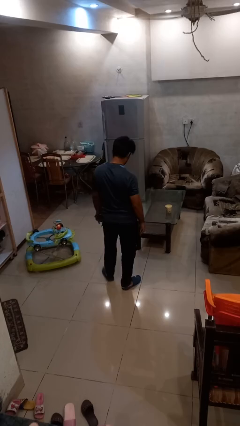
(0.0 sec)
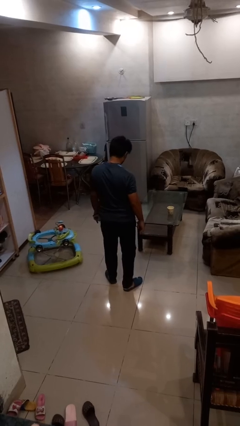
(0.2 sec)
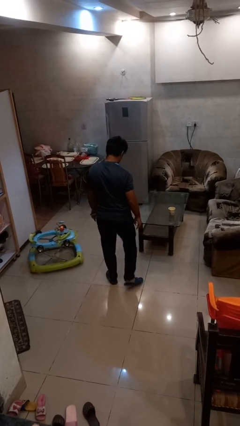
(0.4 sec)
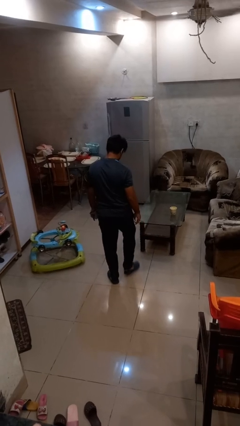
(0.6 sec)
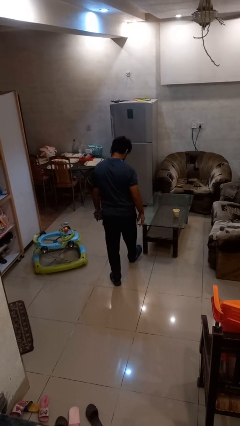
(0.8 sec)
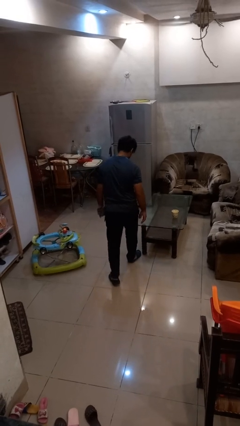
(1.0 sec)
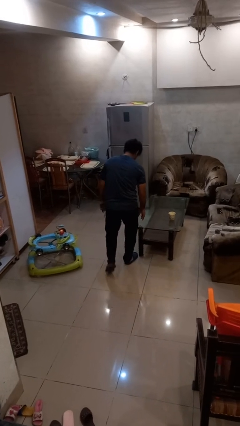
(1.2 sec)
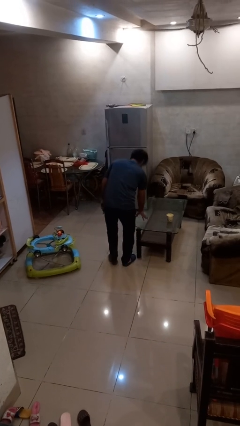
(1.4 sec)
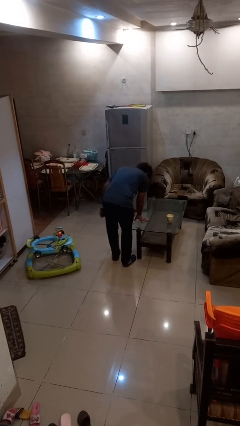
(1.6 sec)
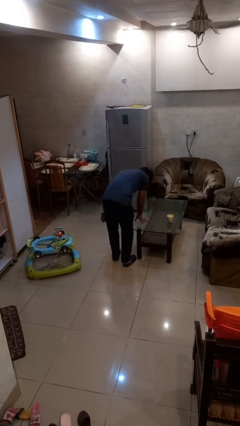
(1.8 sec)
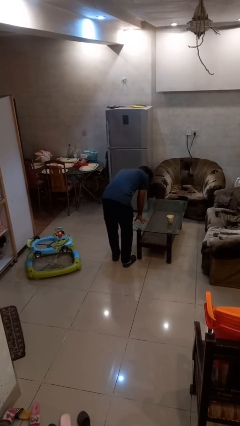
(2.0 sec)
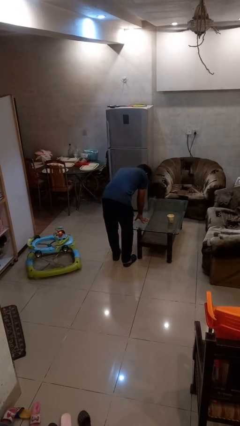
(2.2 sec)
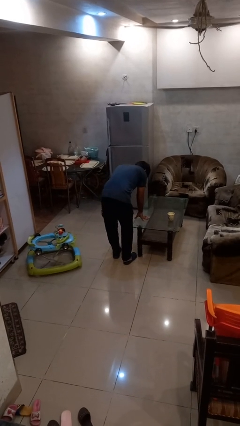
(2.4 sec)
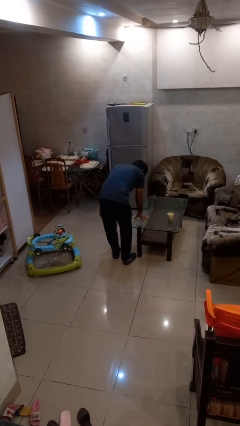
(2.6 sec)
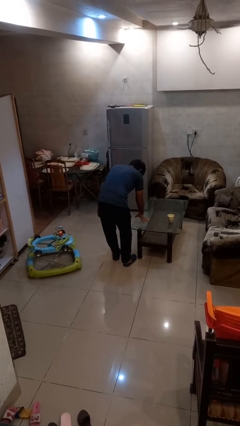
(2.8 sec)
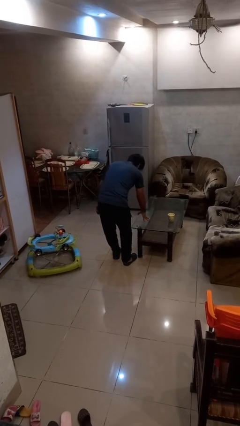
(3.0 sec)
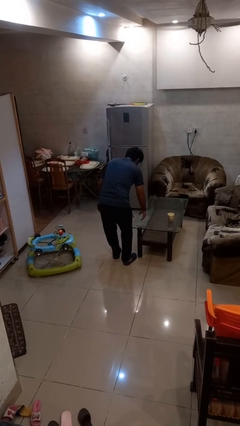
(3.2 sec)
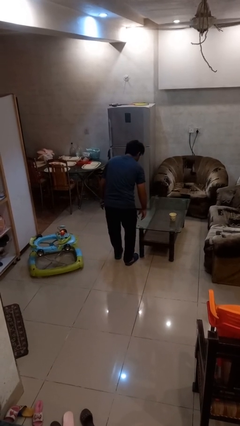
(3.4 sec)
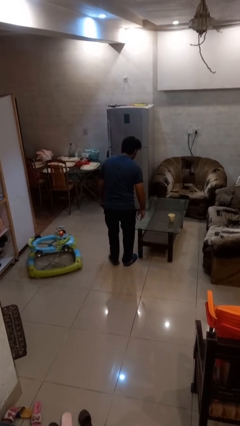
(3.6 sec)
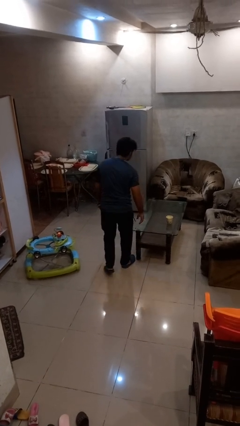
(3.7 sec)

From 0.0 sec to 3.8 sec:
person bumps into table

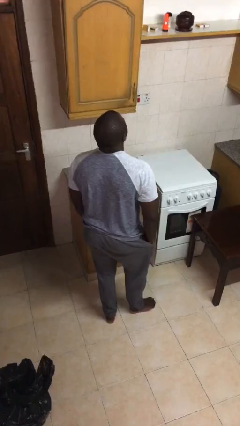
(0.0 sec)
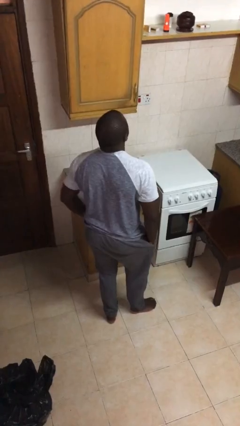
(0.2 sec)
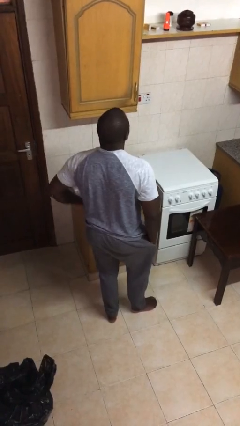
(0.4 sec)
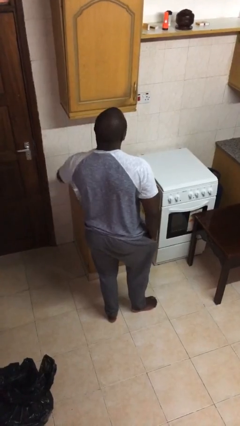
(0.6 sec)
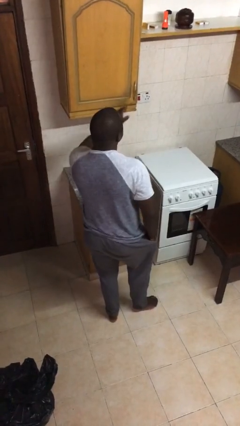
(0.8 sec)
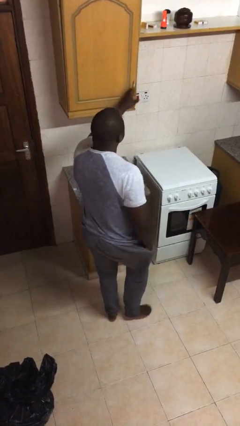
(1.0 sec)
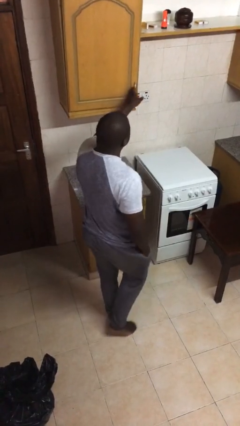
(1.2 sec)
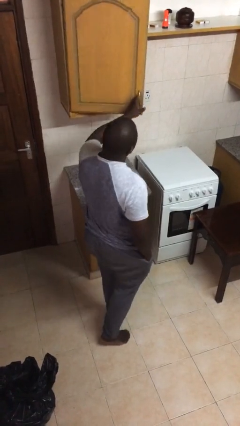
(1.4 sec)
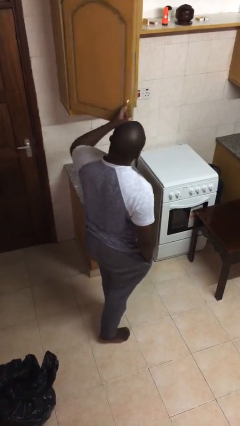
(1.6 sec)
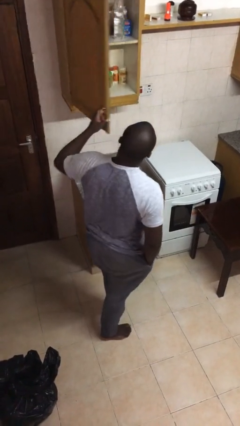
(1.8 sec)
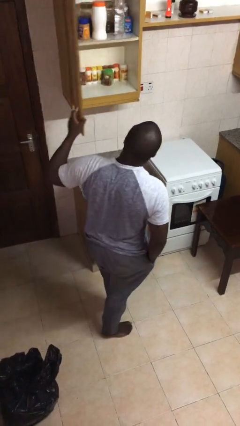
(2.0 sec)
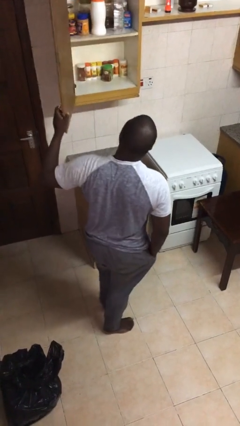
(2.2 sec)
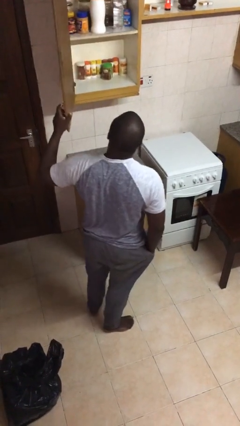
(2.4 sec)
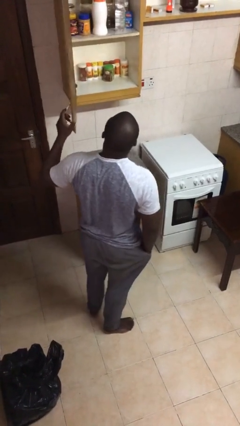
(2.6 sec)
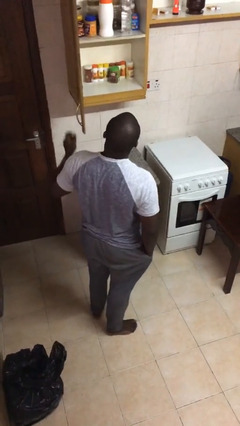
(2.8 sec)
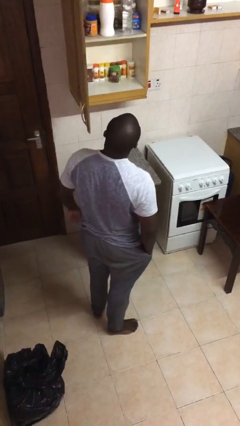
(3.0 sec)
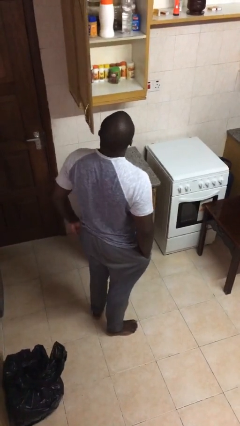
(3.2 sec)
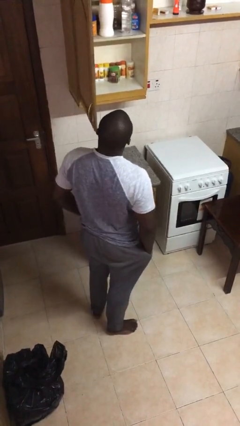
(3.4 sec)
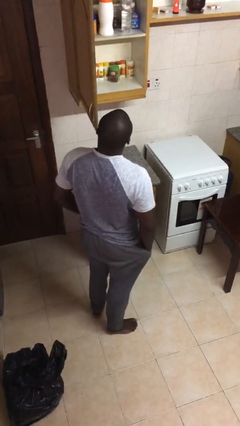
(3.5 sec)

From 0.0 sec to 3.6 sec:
person opens cabinet

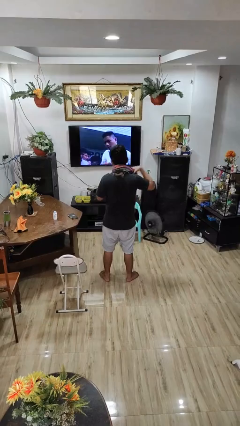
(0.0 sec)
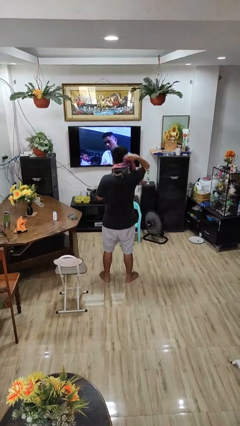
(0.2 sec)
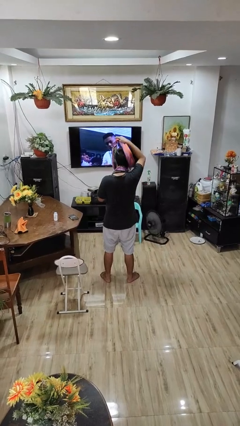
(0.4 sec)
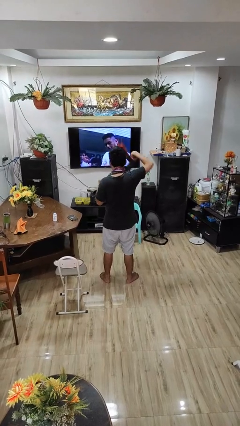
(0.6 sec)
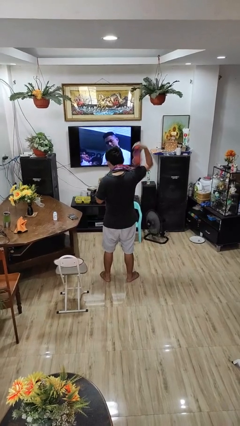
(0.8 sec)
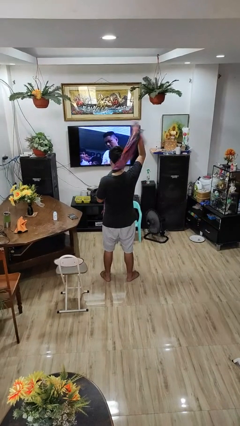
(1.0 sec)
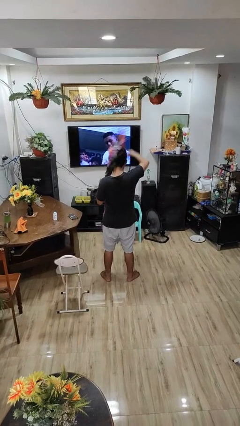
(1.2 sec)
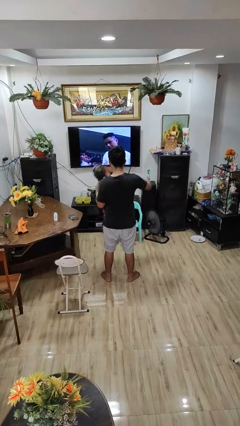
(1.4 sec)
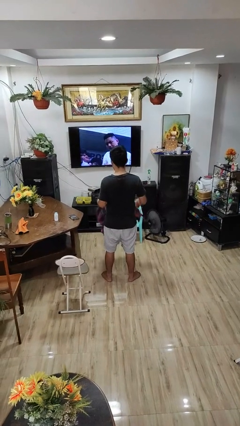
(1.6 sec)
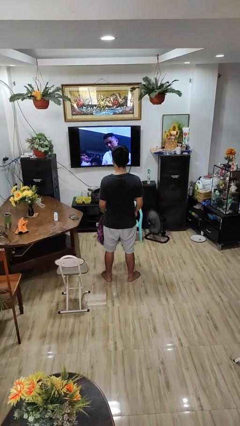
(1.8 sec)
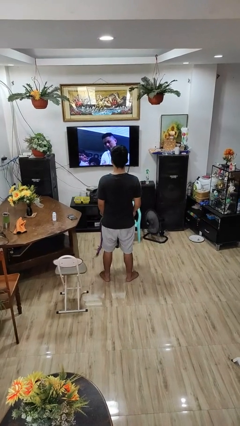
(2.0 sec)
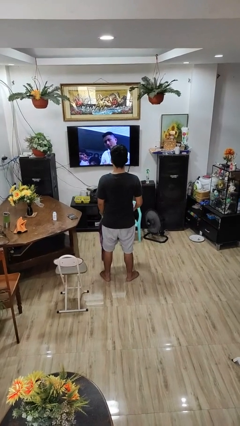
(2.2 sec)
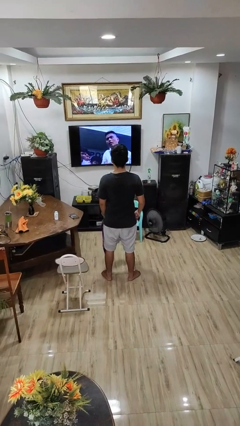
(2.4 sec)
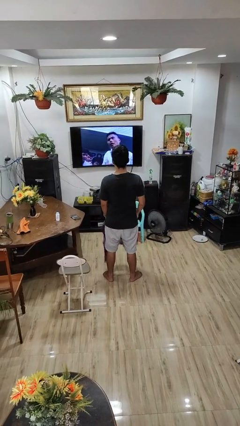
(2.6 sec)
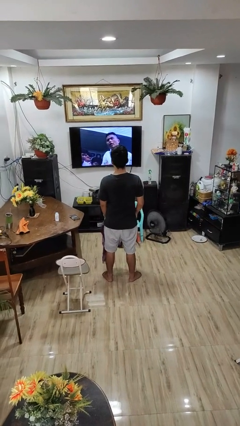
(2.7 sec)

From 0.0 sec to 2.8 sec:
person takes off scarf

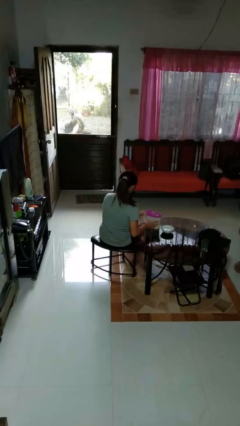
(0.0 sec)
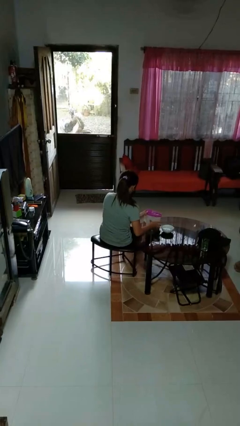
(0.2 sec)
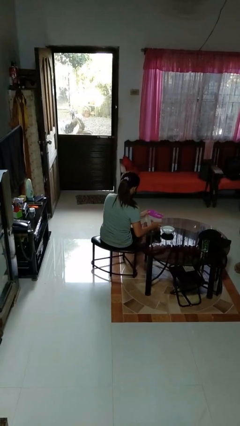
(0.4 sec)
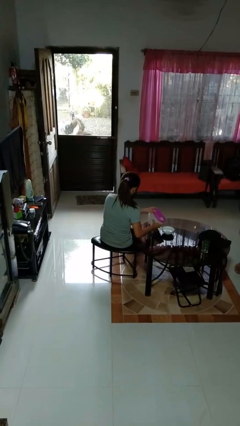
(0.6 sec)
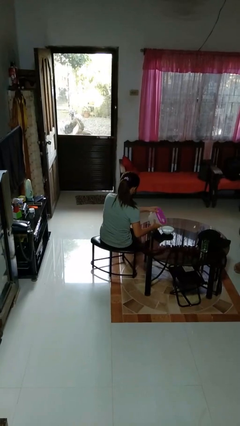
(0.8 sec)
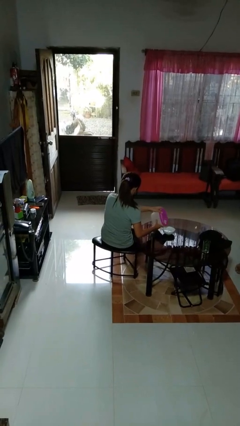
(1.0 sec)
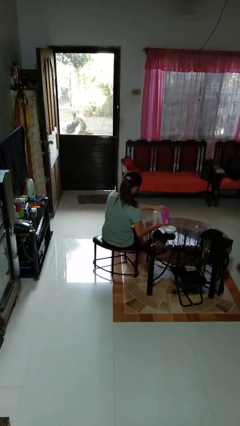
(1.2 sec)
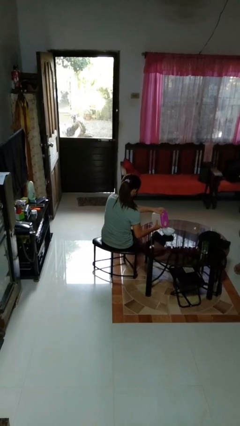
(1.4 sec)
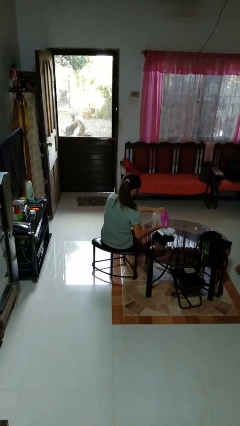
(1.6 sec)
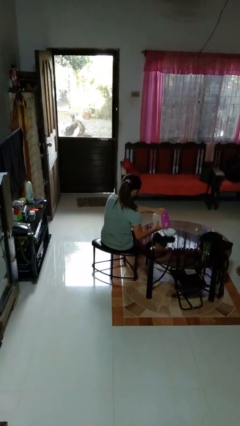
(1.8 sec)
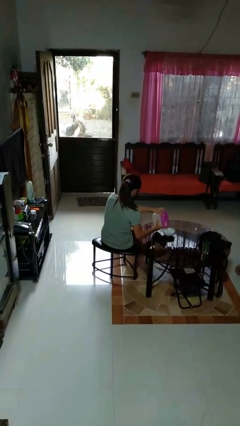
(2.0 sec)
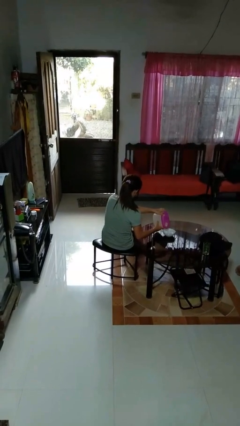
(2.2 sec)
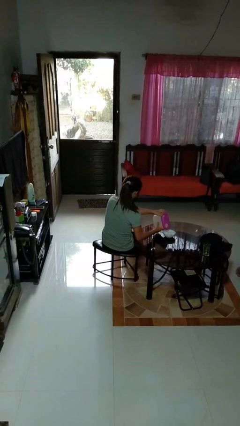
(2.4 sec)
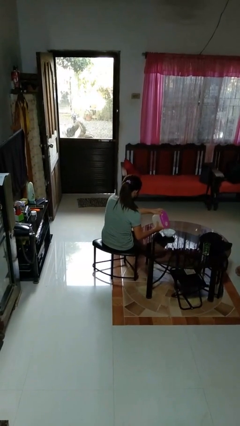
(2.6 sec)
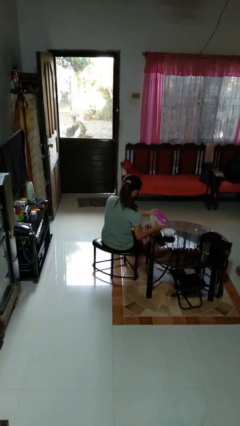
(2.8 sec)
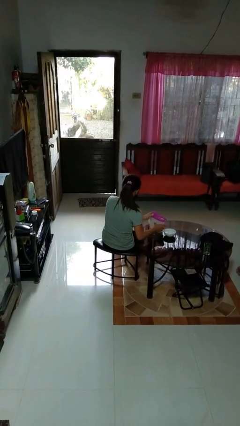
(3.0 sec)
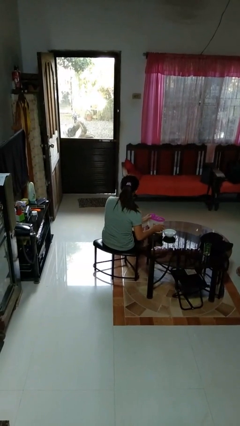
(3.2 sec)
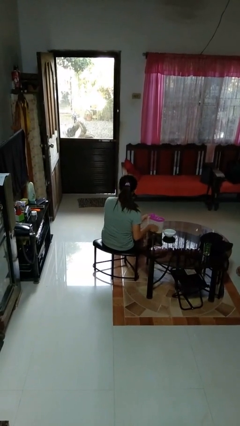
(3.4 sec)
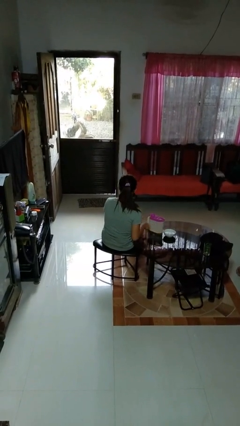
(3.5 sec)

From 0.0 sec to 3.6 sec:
person pours into bowl

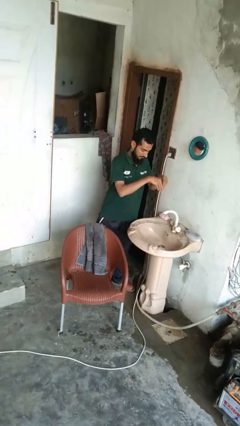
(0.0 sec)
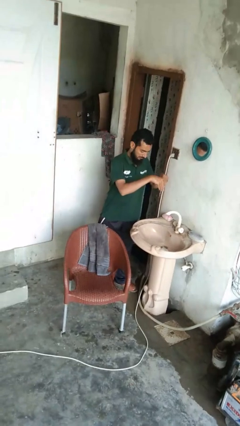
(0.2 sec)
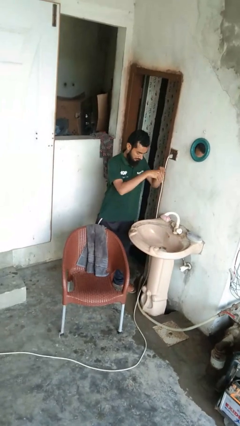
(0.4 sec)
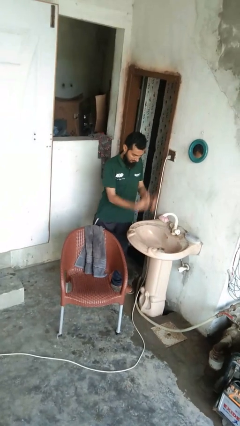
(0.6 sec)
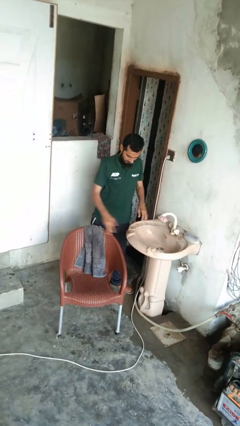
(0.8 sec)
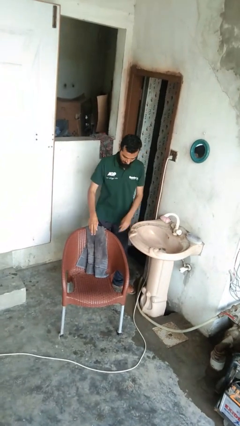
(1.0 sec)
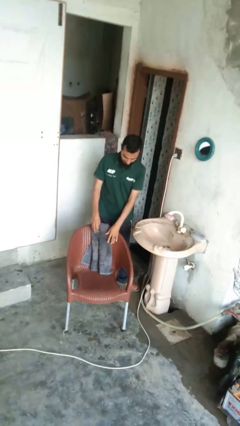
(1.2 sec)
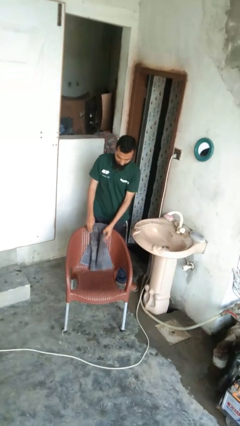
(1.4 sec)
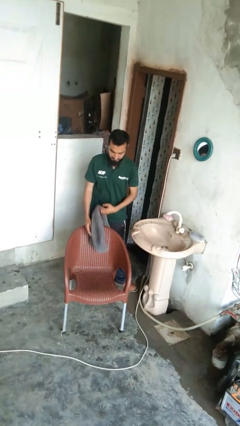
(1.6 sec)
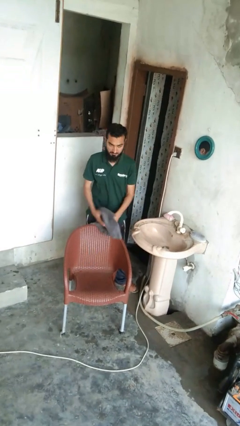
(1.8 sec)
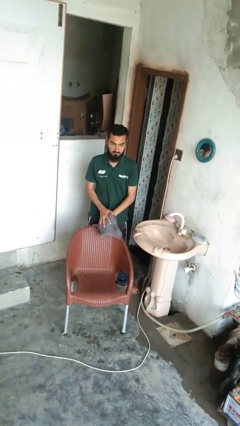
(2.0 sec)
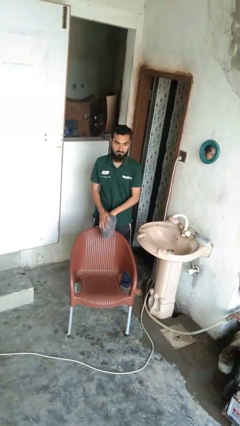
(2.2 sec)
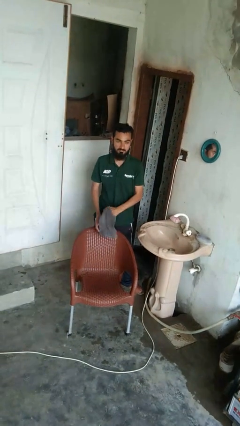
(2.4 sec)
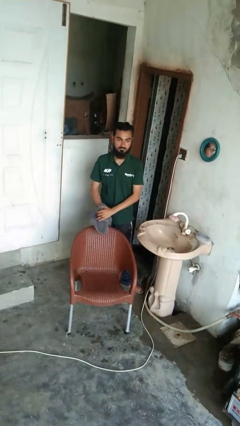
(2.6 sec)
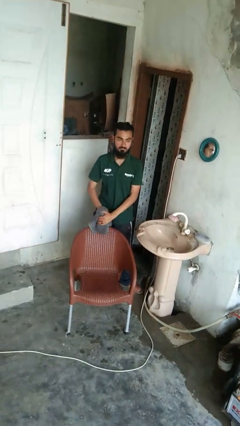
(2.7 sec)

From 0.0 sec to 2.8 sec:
person dries hands with towel

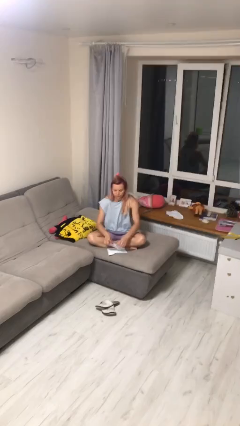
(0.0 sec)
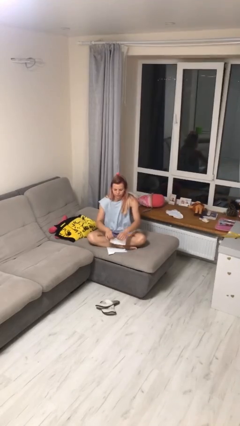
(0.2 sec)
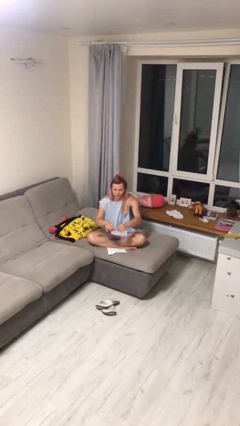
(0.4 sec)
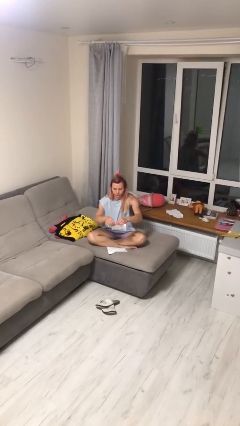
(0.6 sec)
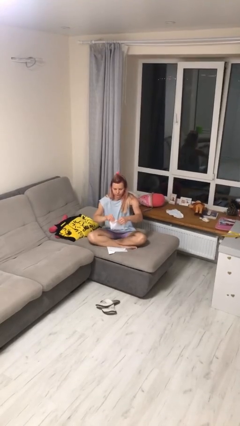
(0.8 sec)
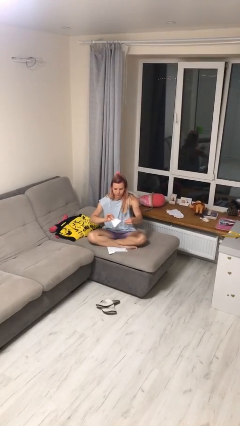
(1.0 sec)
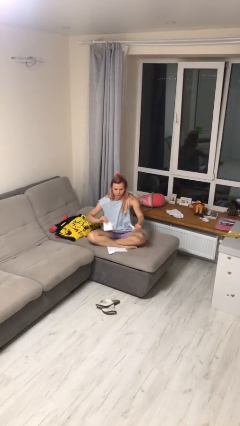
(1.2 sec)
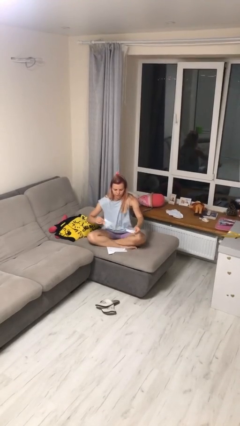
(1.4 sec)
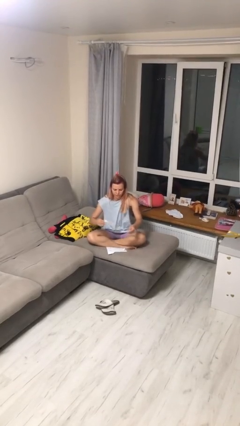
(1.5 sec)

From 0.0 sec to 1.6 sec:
person tears paper
